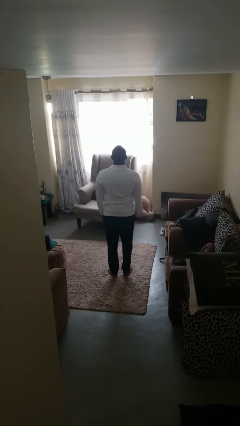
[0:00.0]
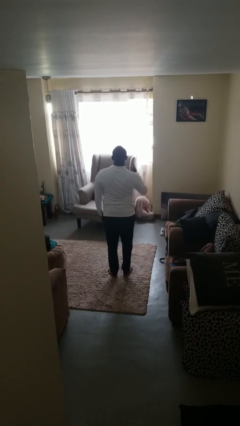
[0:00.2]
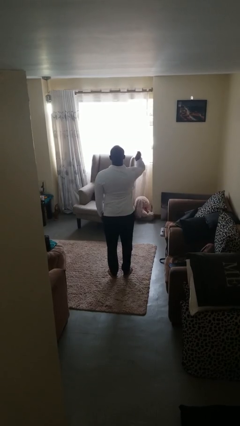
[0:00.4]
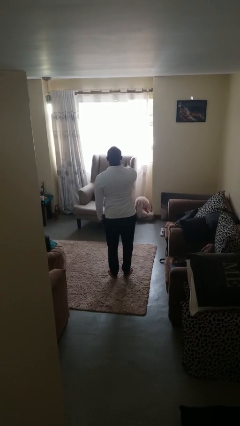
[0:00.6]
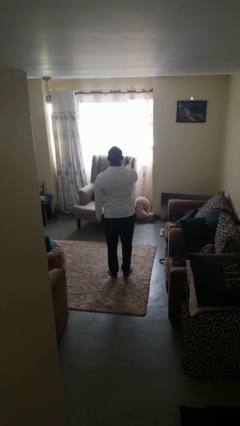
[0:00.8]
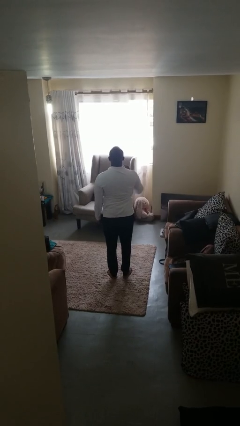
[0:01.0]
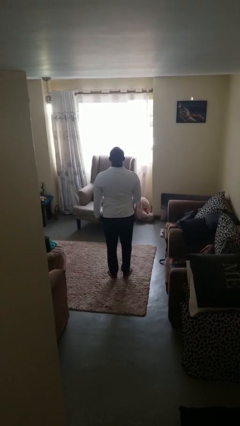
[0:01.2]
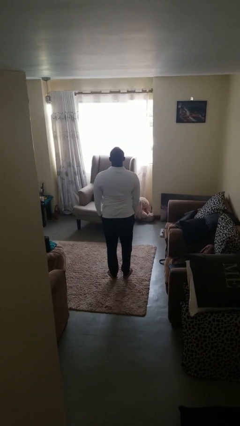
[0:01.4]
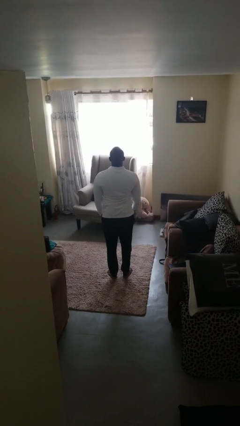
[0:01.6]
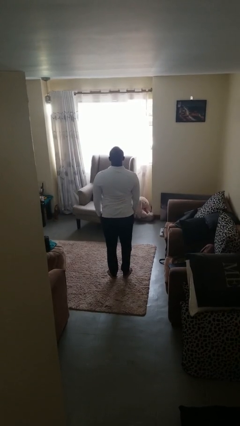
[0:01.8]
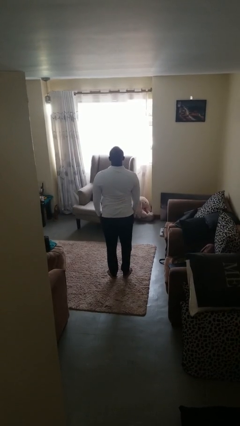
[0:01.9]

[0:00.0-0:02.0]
person karate chop

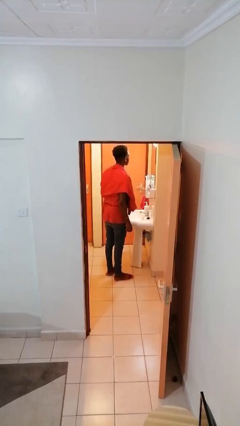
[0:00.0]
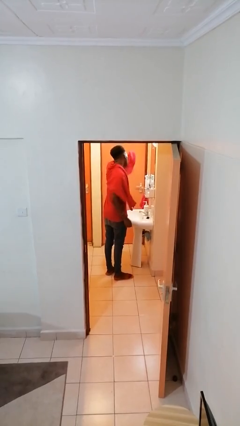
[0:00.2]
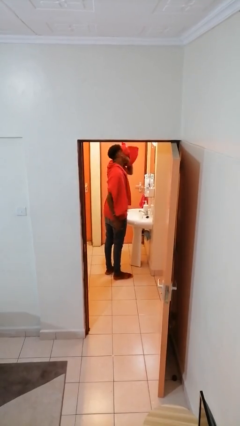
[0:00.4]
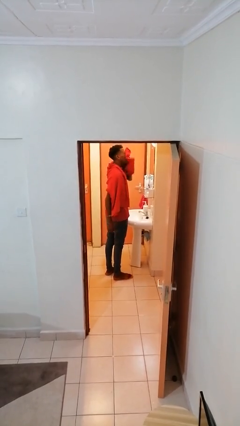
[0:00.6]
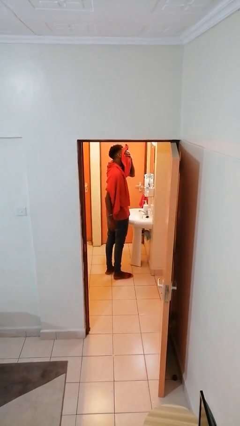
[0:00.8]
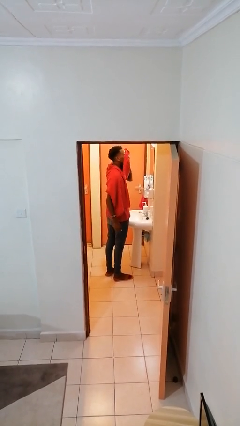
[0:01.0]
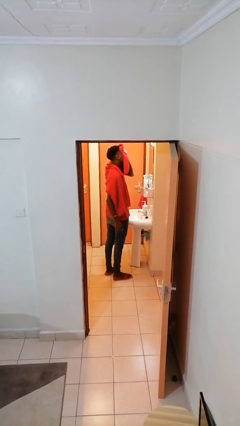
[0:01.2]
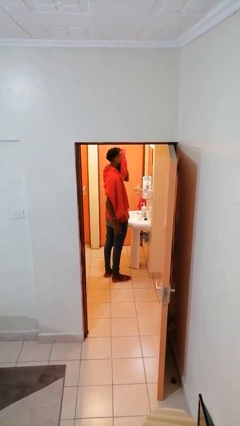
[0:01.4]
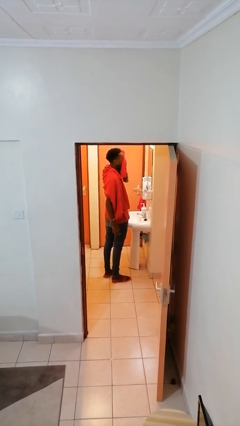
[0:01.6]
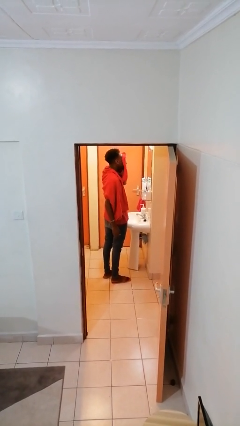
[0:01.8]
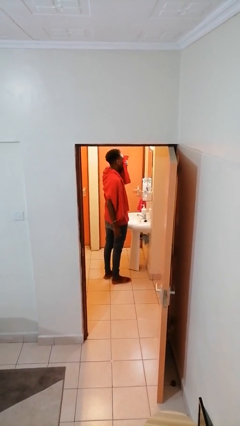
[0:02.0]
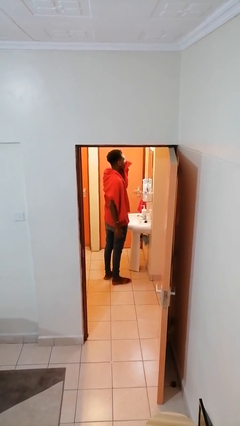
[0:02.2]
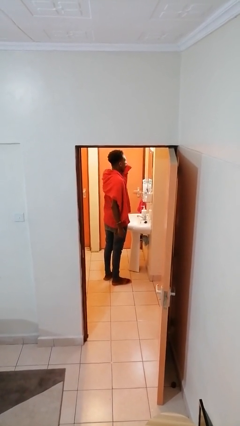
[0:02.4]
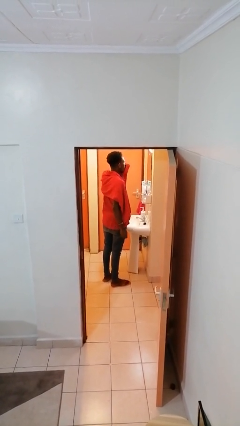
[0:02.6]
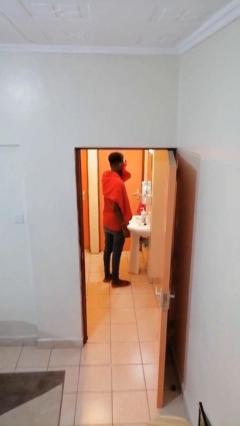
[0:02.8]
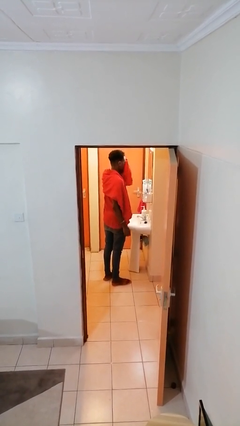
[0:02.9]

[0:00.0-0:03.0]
person dries face with towel

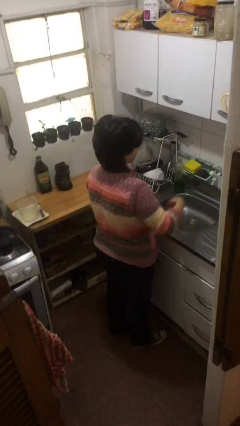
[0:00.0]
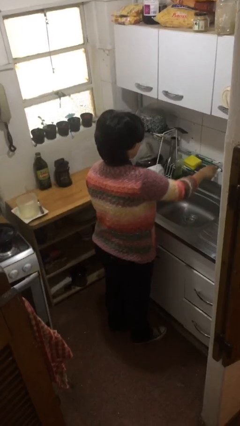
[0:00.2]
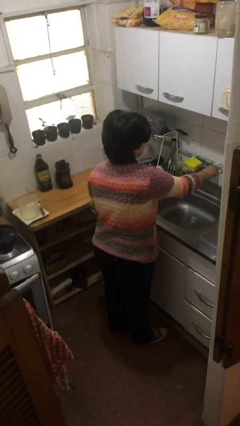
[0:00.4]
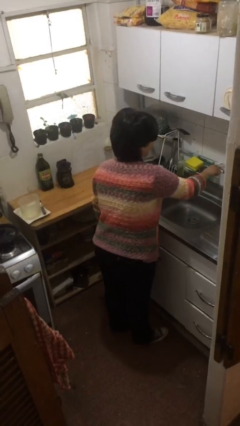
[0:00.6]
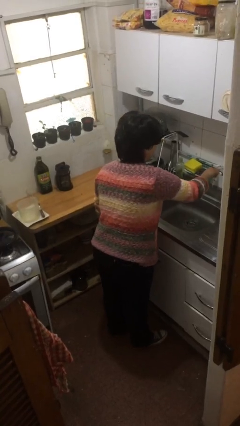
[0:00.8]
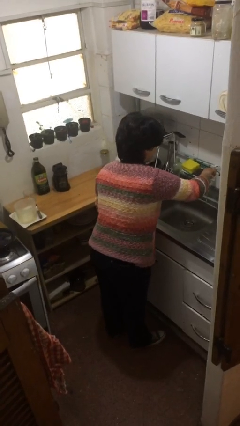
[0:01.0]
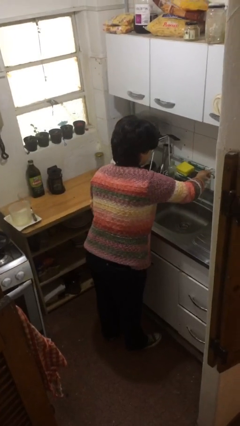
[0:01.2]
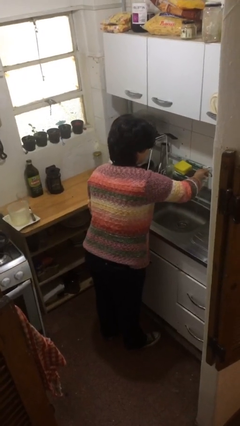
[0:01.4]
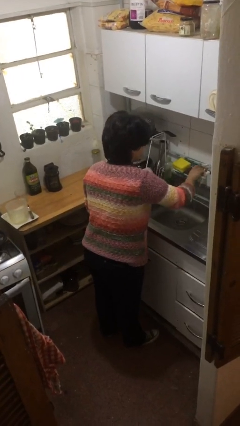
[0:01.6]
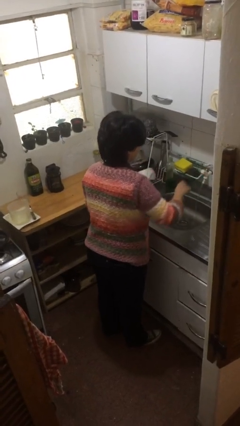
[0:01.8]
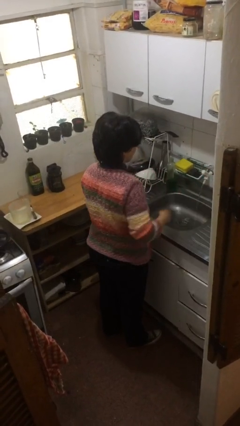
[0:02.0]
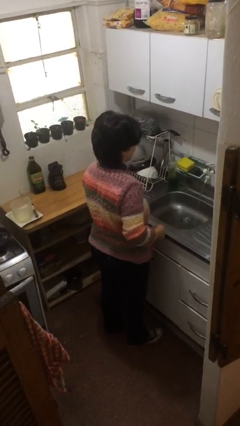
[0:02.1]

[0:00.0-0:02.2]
person turns on faucet

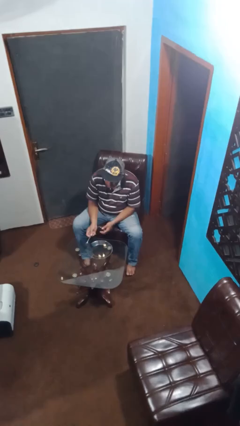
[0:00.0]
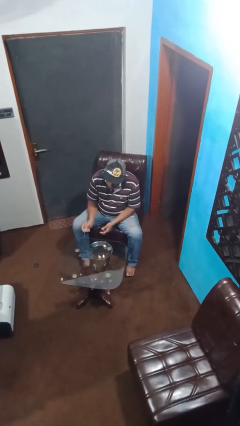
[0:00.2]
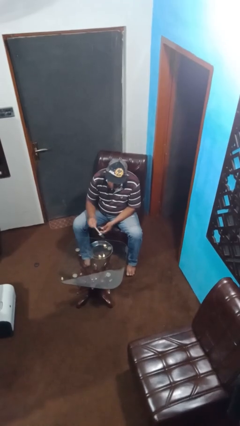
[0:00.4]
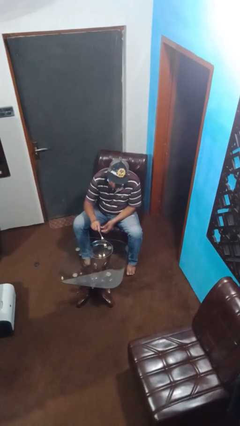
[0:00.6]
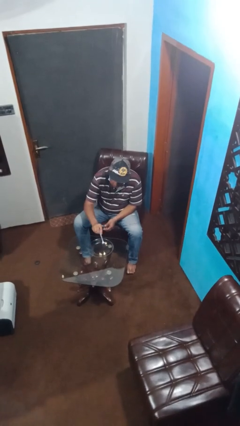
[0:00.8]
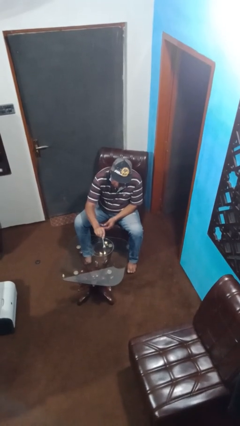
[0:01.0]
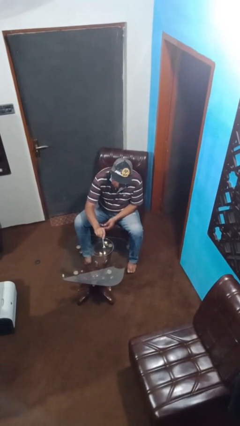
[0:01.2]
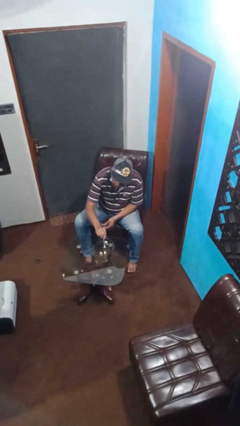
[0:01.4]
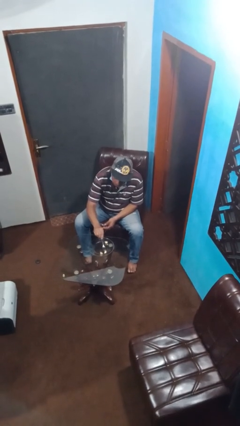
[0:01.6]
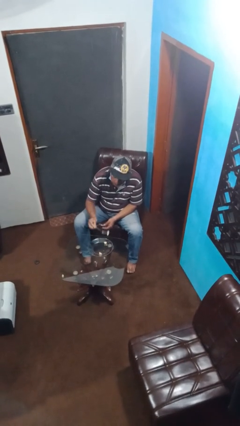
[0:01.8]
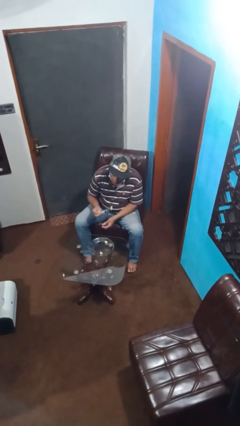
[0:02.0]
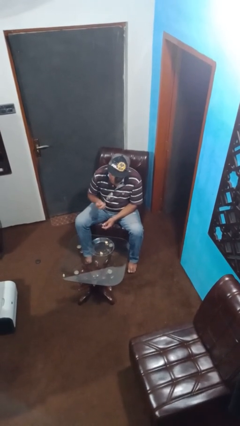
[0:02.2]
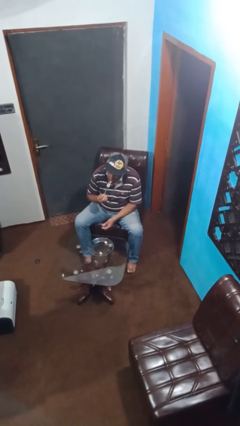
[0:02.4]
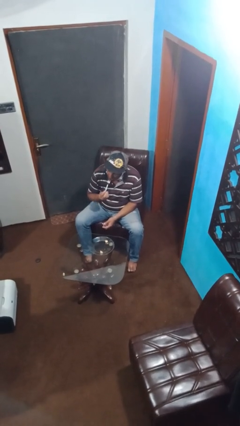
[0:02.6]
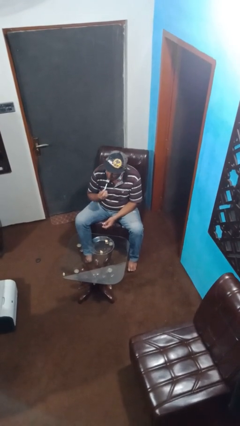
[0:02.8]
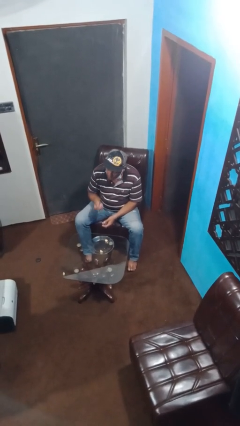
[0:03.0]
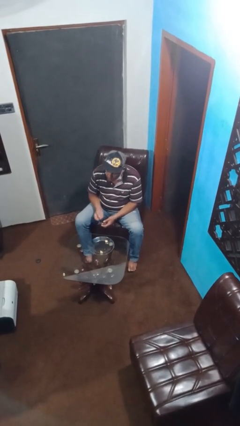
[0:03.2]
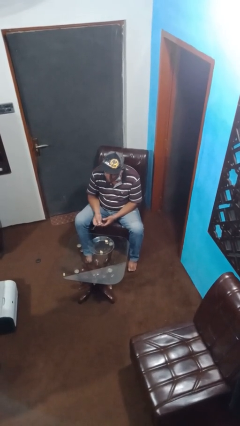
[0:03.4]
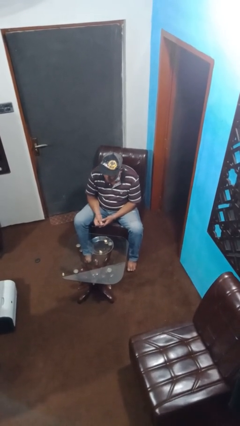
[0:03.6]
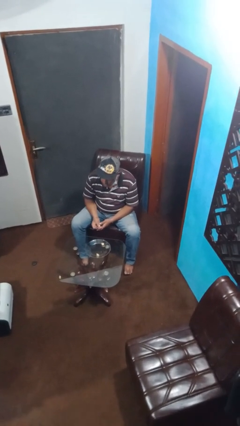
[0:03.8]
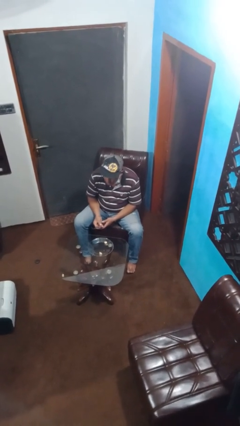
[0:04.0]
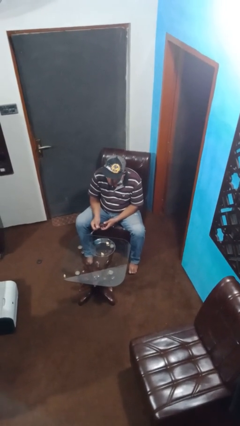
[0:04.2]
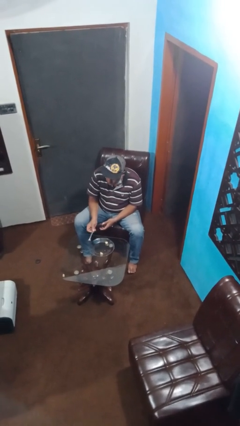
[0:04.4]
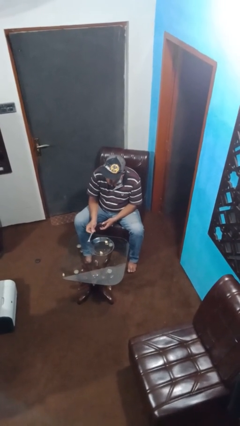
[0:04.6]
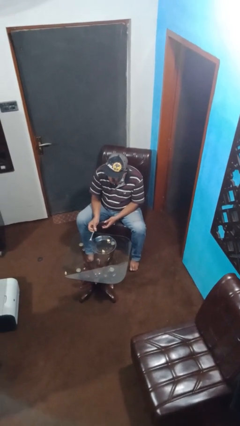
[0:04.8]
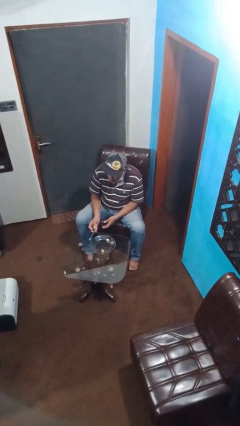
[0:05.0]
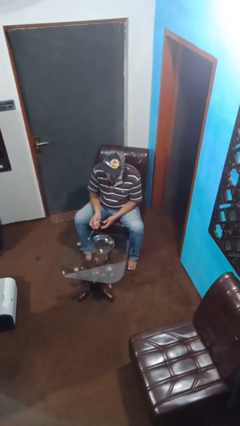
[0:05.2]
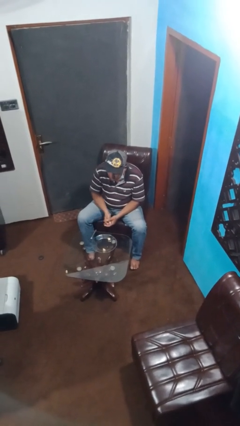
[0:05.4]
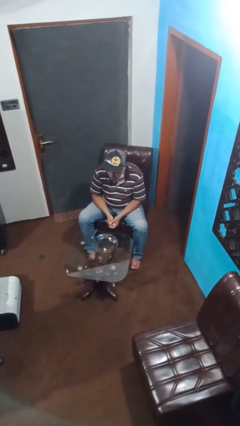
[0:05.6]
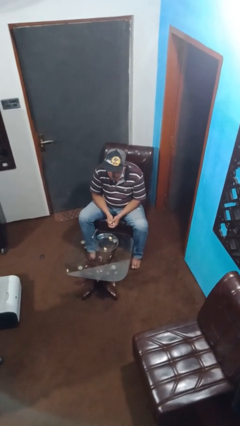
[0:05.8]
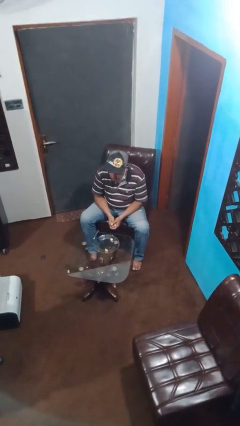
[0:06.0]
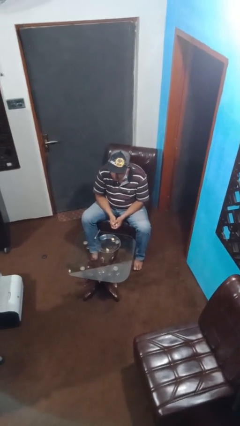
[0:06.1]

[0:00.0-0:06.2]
person eats with utensil

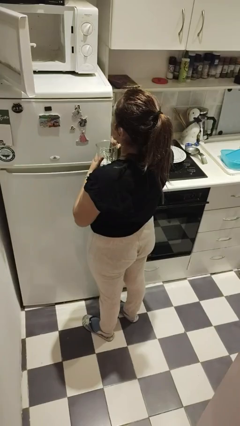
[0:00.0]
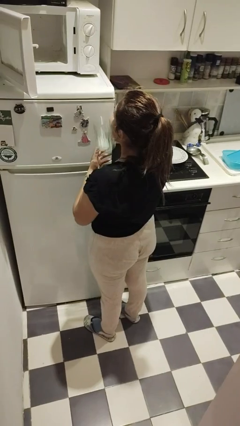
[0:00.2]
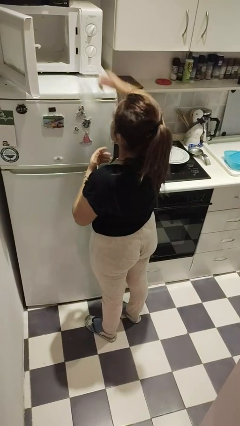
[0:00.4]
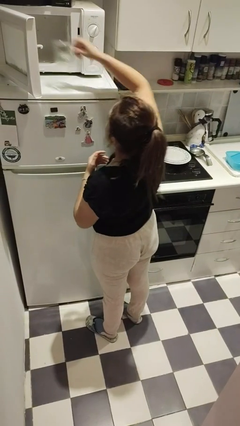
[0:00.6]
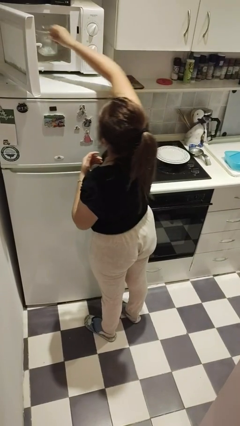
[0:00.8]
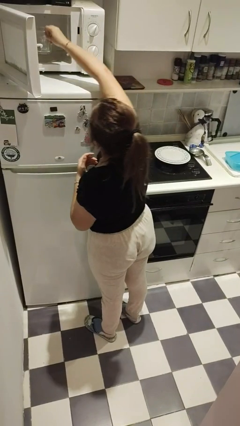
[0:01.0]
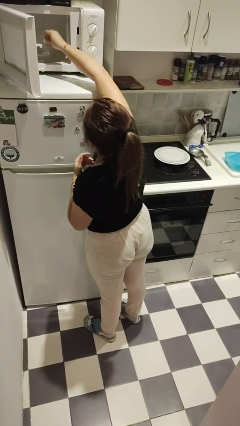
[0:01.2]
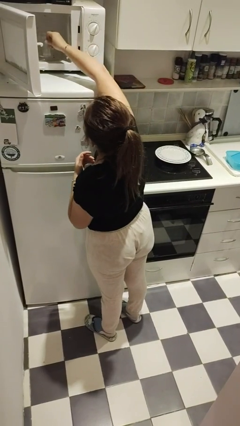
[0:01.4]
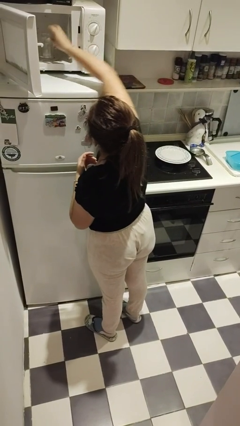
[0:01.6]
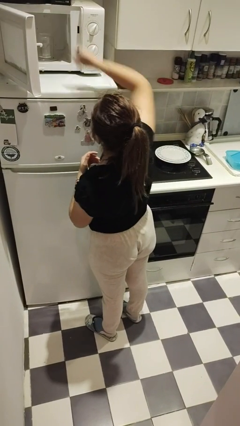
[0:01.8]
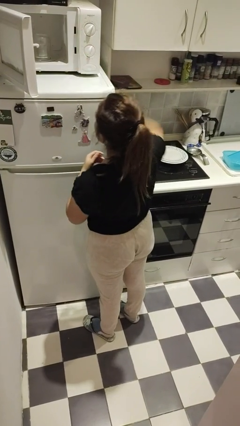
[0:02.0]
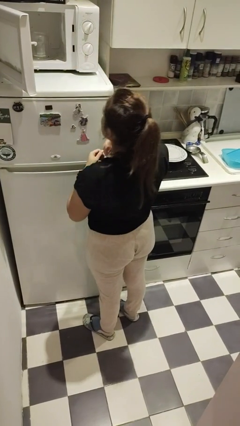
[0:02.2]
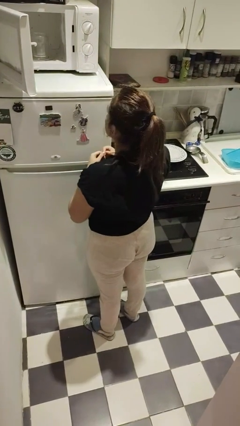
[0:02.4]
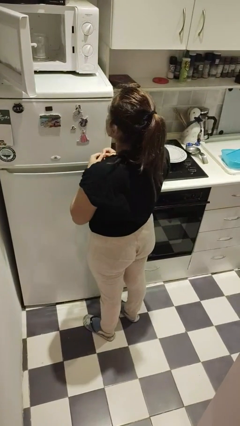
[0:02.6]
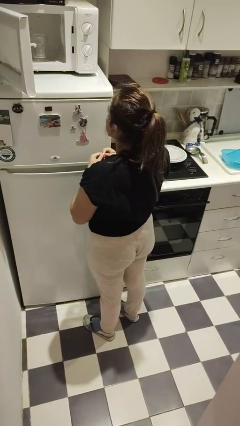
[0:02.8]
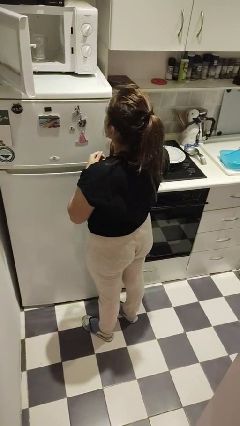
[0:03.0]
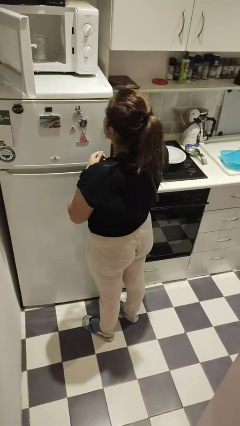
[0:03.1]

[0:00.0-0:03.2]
person puts object into microwave

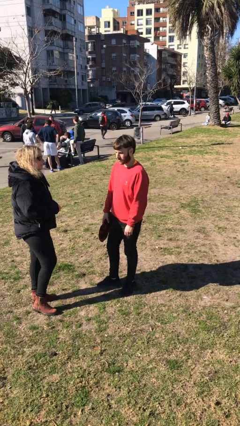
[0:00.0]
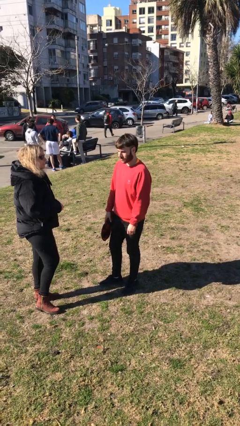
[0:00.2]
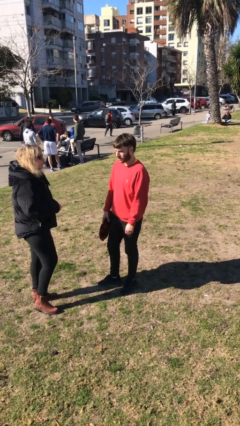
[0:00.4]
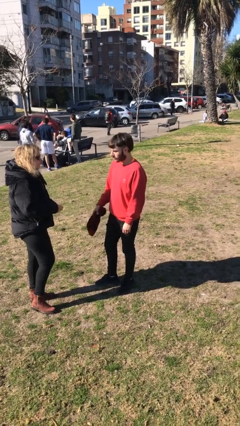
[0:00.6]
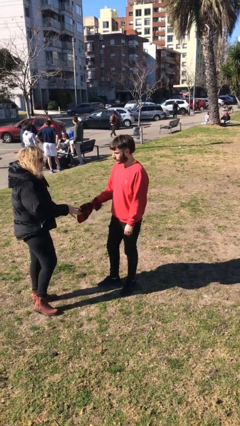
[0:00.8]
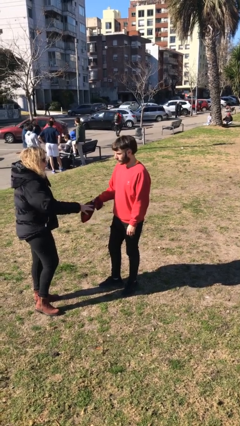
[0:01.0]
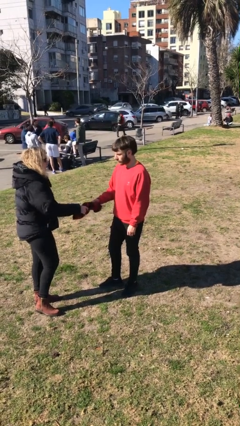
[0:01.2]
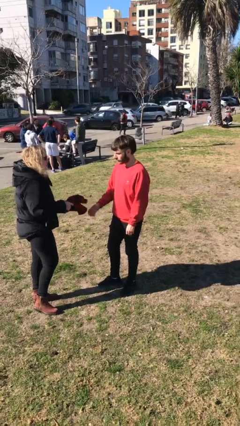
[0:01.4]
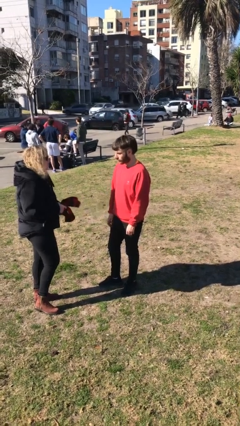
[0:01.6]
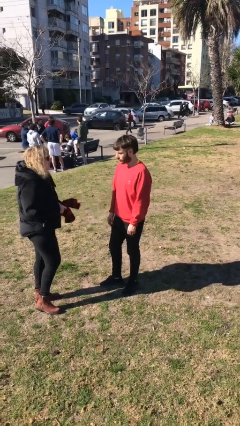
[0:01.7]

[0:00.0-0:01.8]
person transfers object to person
